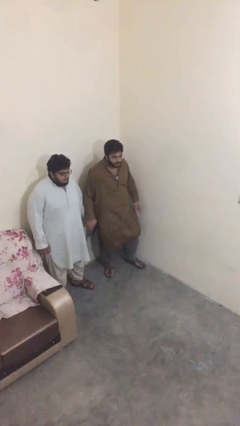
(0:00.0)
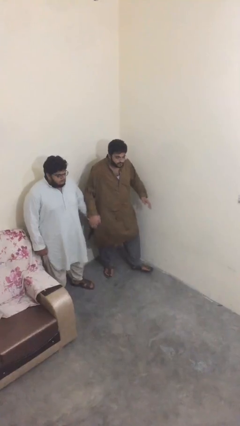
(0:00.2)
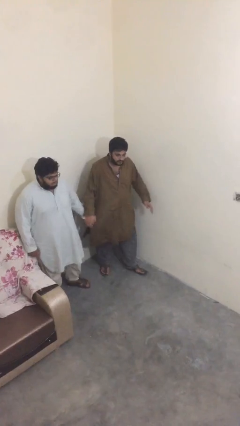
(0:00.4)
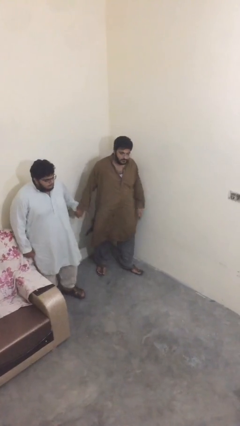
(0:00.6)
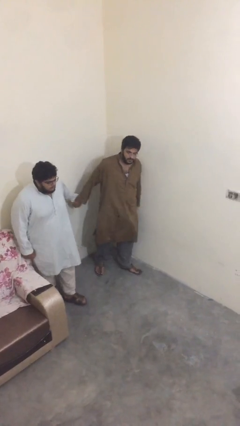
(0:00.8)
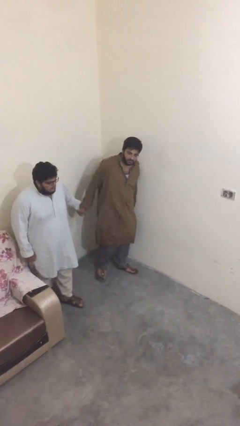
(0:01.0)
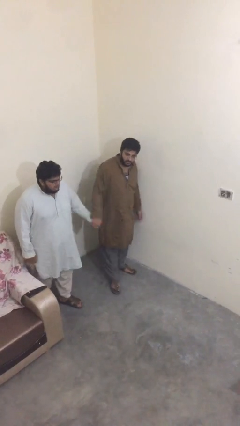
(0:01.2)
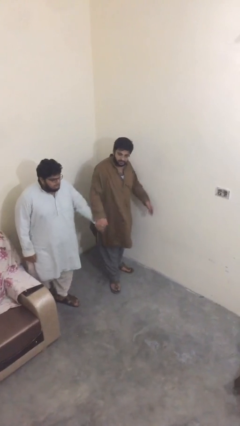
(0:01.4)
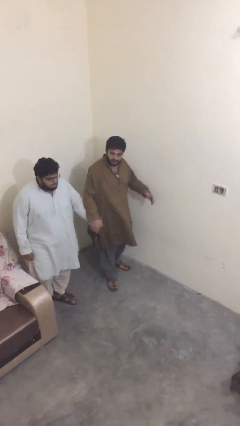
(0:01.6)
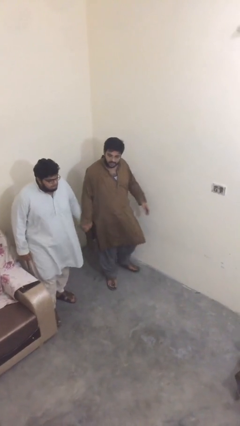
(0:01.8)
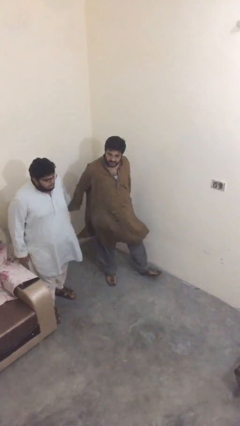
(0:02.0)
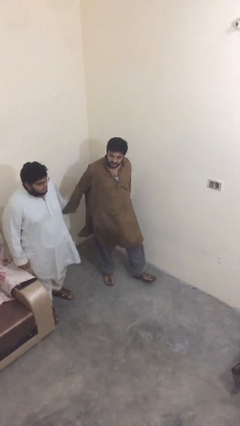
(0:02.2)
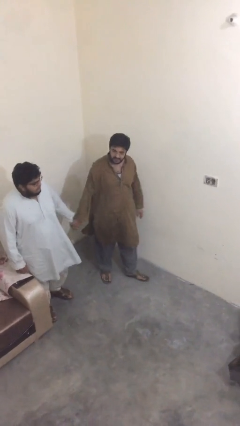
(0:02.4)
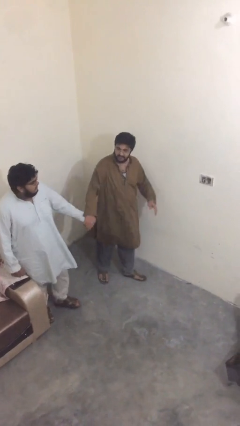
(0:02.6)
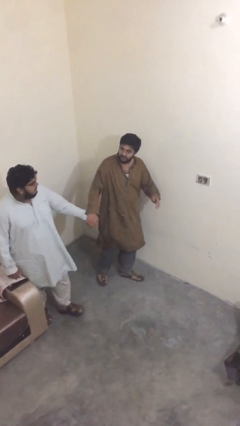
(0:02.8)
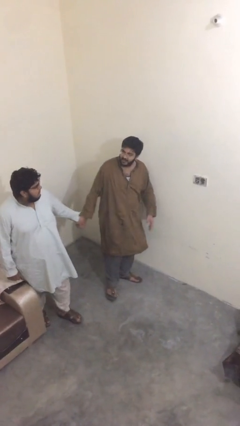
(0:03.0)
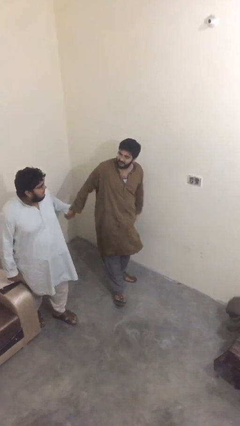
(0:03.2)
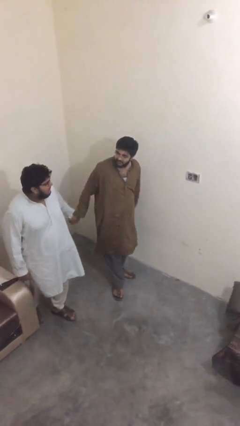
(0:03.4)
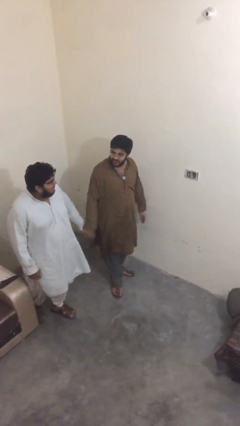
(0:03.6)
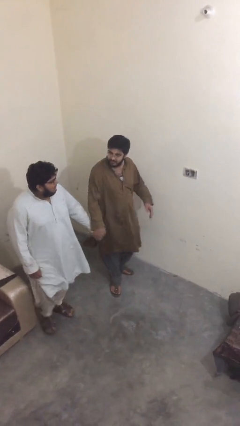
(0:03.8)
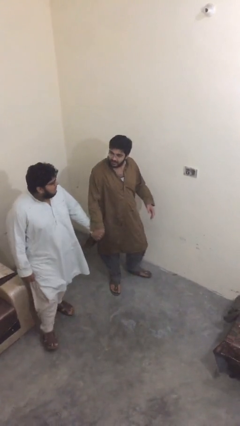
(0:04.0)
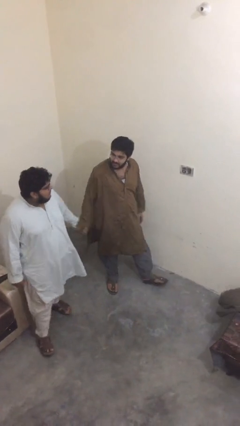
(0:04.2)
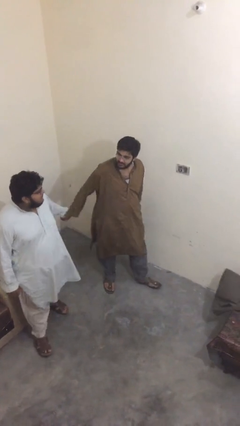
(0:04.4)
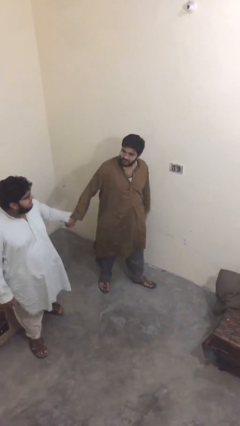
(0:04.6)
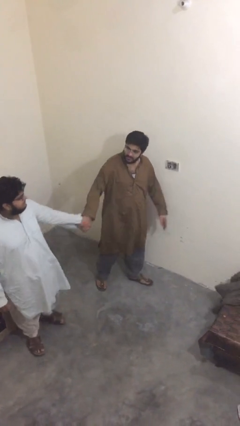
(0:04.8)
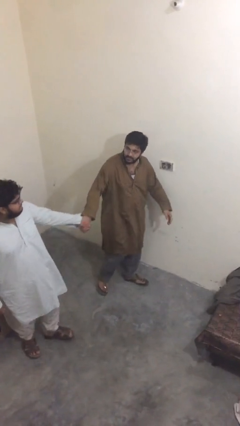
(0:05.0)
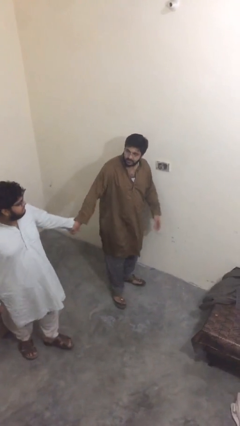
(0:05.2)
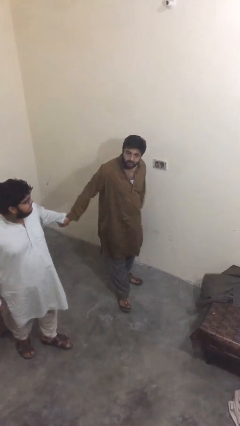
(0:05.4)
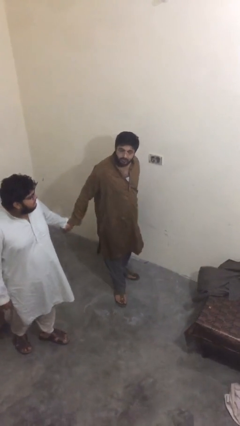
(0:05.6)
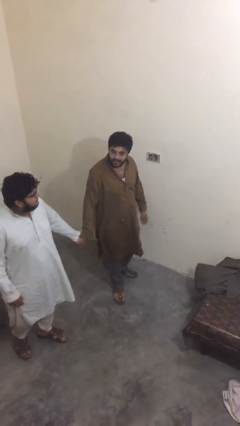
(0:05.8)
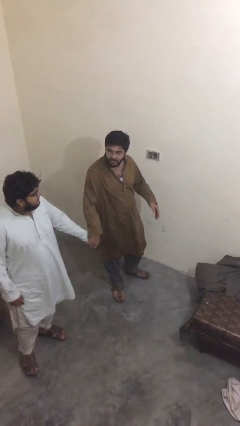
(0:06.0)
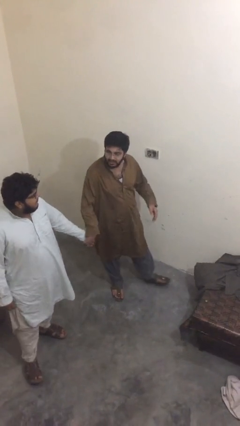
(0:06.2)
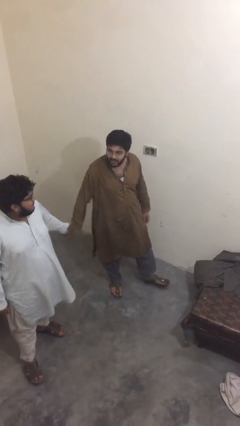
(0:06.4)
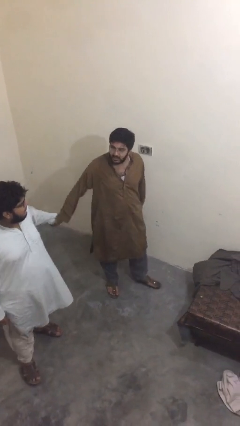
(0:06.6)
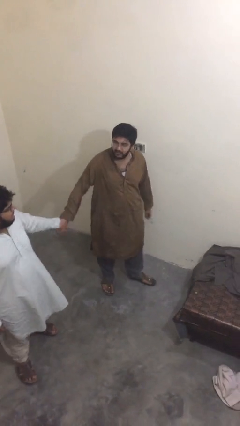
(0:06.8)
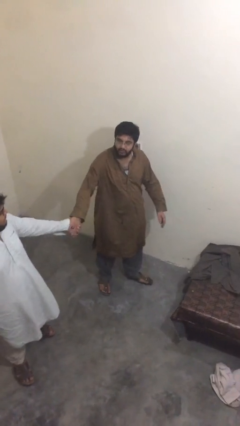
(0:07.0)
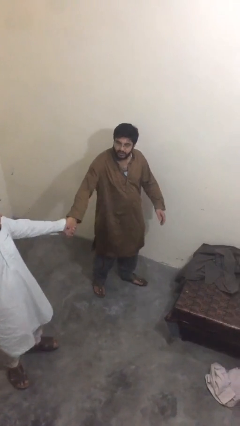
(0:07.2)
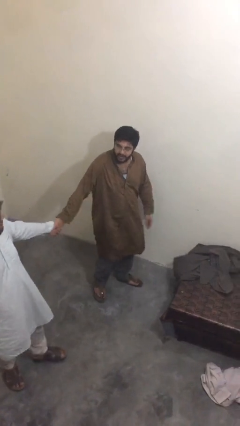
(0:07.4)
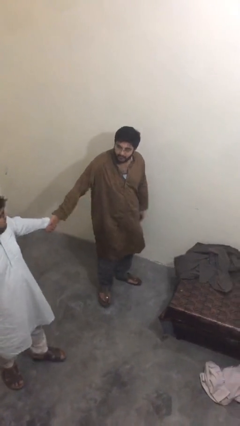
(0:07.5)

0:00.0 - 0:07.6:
person holds hand

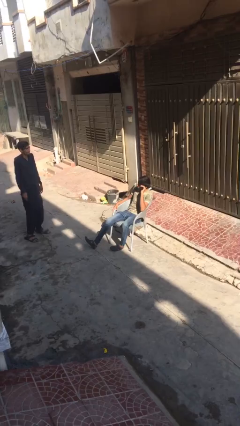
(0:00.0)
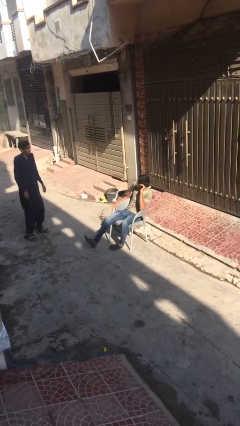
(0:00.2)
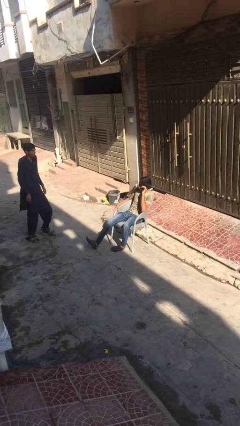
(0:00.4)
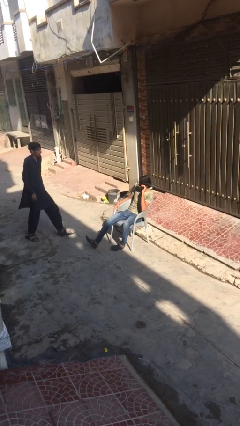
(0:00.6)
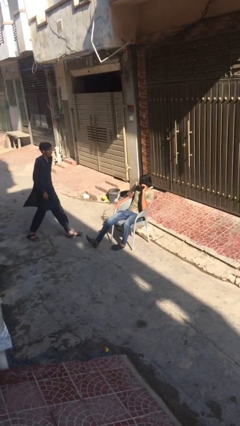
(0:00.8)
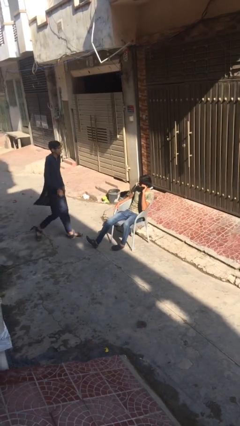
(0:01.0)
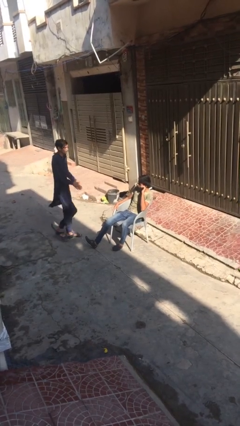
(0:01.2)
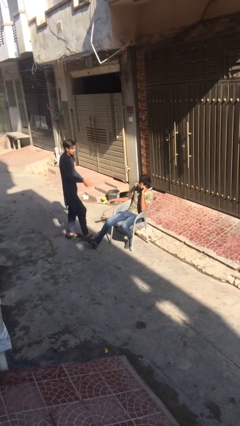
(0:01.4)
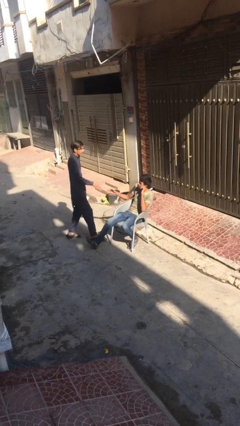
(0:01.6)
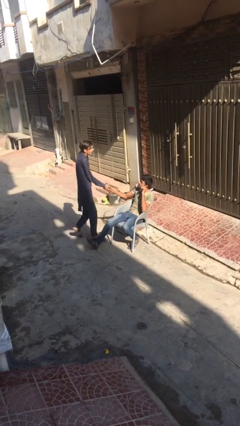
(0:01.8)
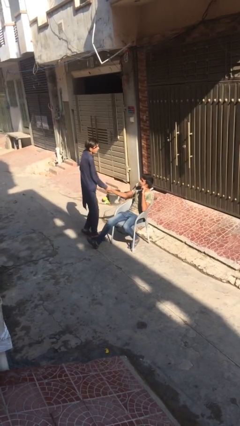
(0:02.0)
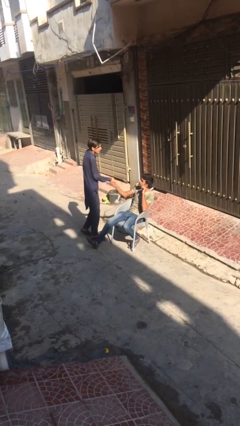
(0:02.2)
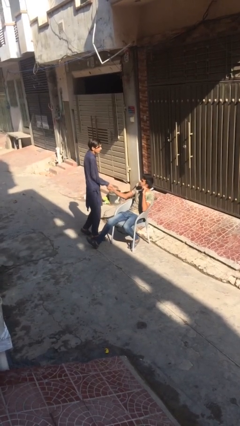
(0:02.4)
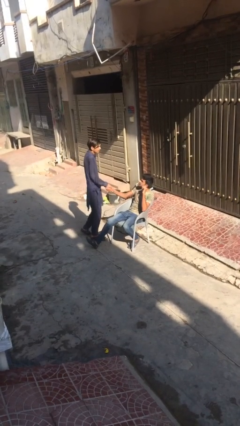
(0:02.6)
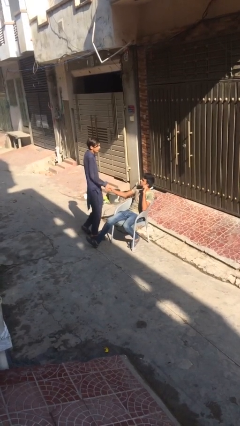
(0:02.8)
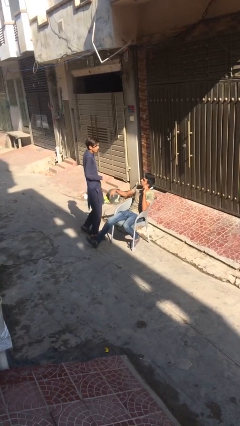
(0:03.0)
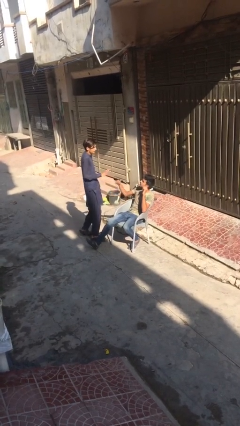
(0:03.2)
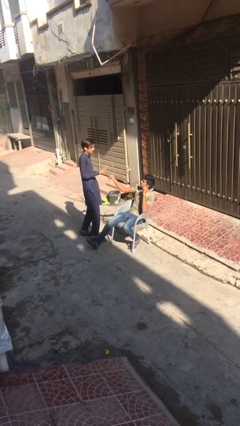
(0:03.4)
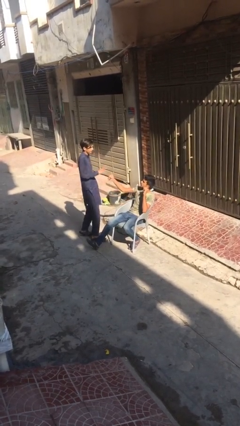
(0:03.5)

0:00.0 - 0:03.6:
person shakes hand

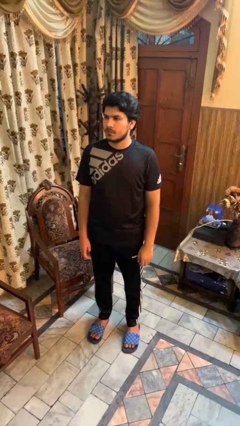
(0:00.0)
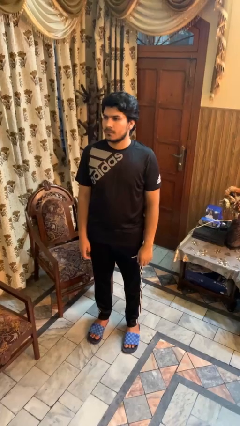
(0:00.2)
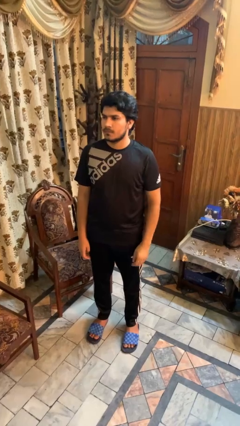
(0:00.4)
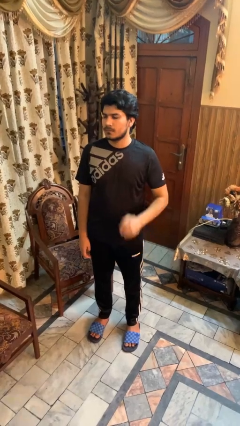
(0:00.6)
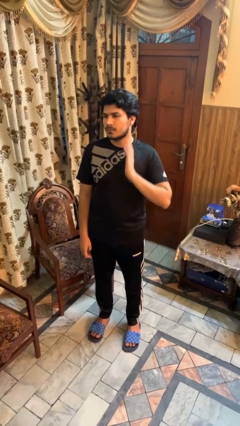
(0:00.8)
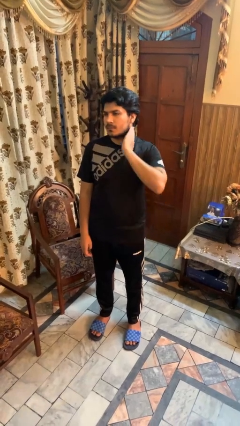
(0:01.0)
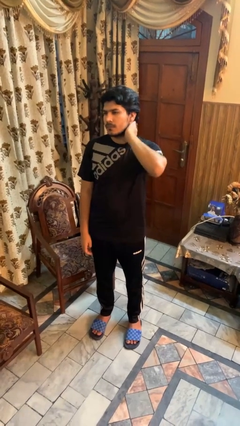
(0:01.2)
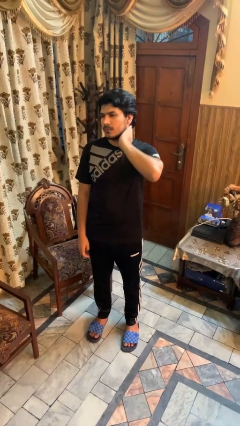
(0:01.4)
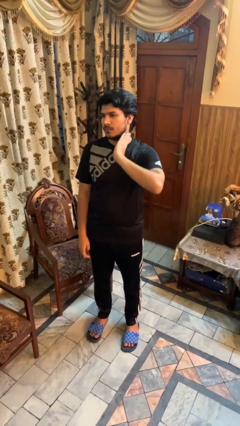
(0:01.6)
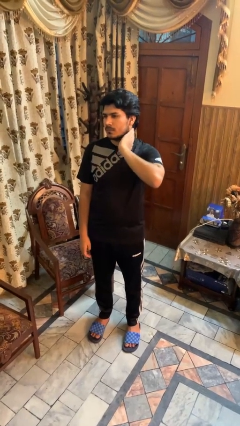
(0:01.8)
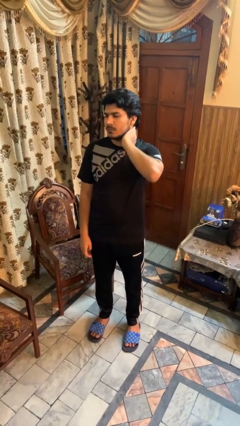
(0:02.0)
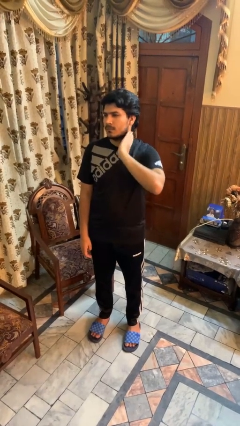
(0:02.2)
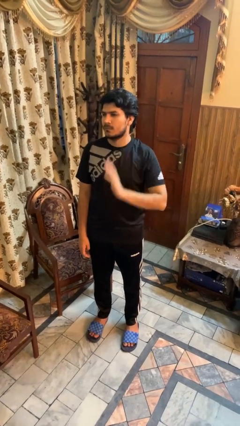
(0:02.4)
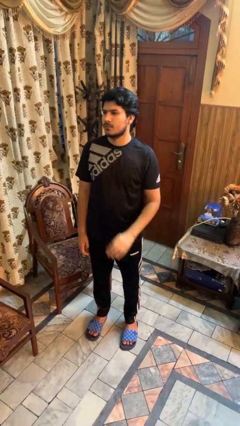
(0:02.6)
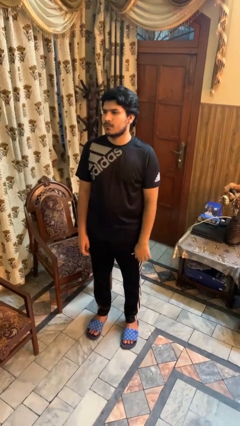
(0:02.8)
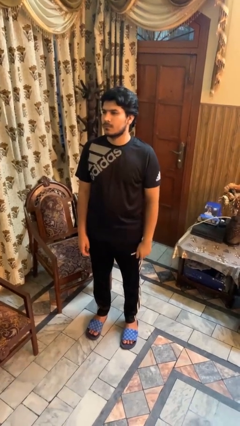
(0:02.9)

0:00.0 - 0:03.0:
person rubs neck

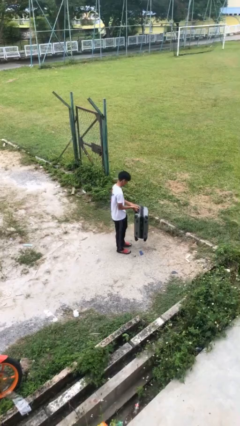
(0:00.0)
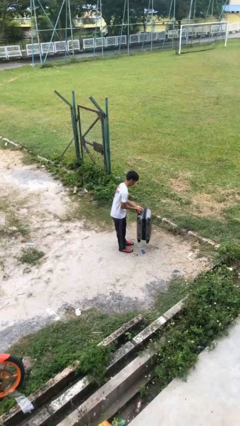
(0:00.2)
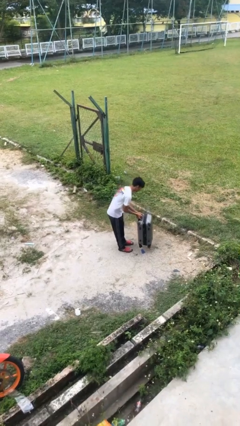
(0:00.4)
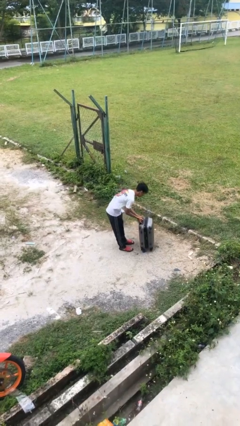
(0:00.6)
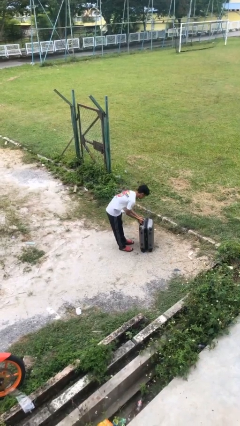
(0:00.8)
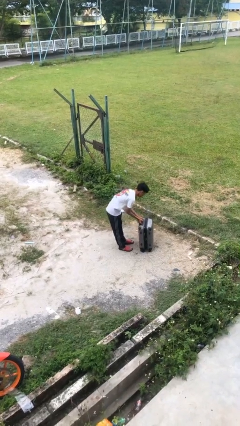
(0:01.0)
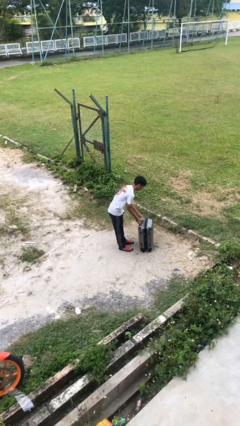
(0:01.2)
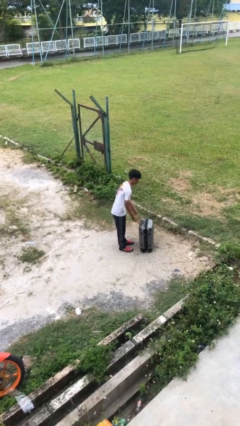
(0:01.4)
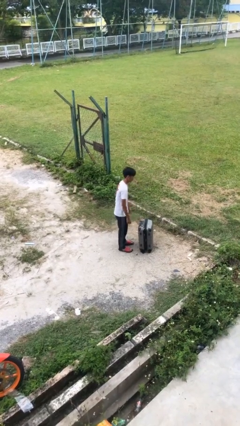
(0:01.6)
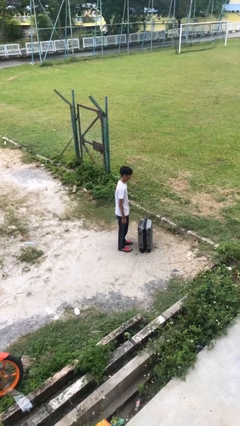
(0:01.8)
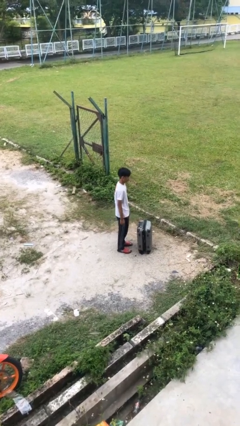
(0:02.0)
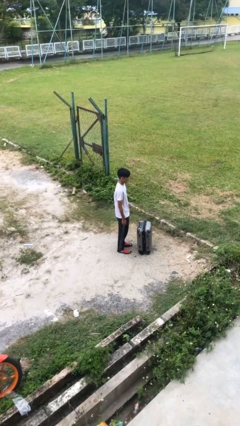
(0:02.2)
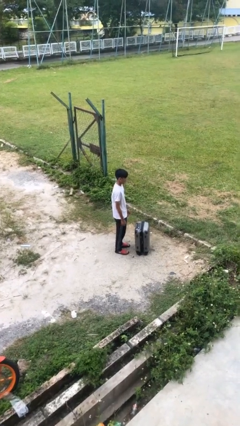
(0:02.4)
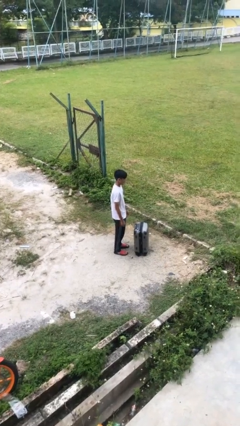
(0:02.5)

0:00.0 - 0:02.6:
person puts down object on floor

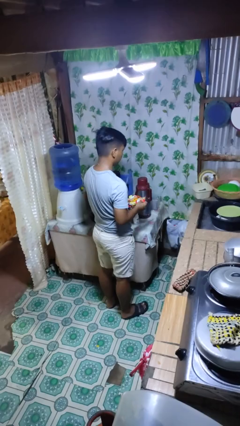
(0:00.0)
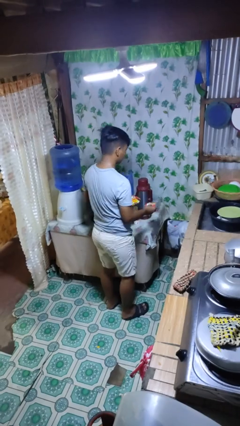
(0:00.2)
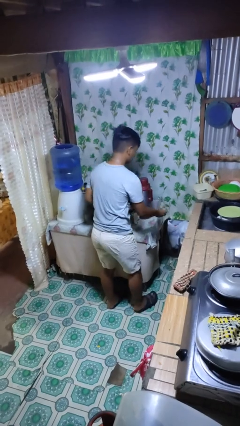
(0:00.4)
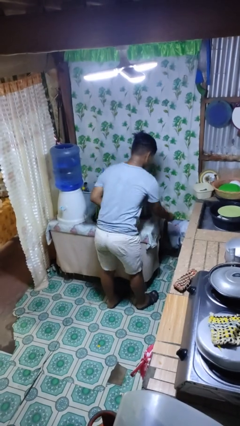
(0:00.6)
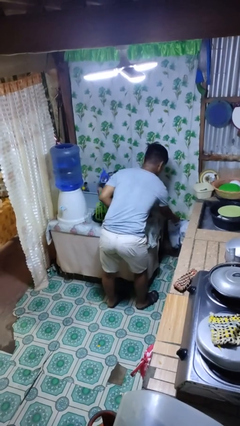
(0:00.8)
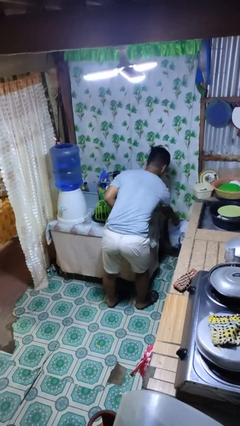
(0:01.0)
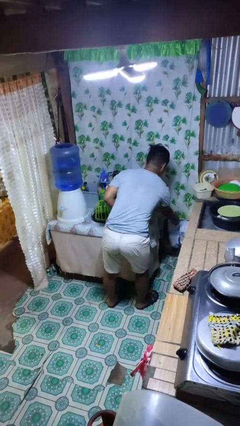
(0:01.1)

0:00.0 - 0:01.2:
person discards trash
